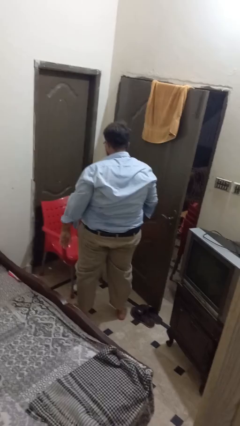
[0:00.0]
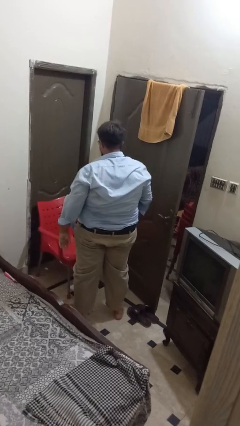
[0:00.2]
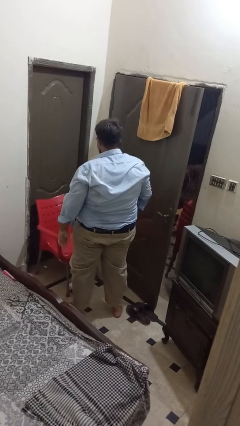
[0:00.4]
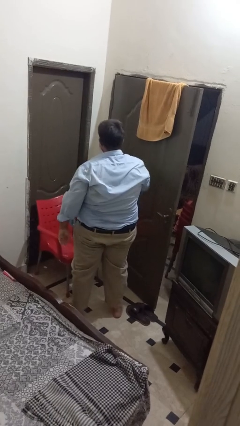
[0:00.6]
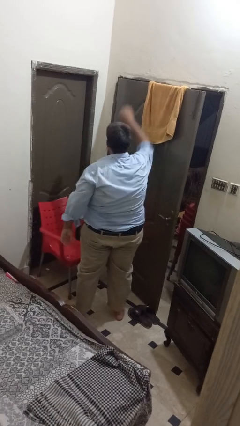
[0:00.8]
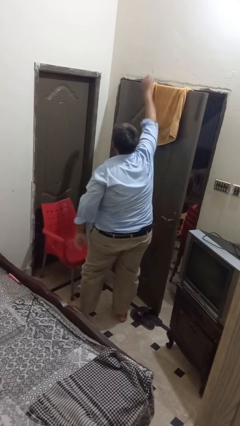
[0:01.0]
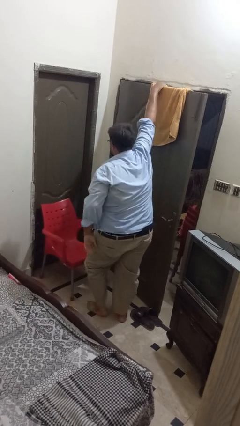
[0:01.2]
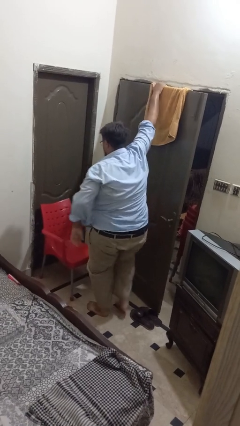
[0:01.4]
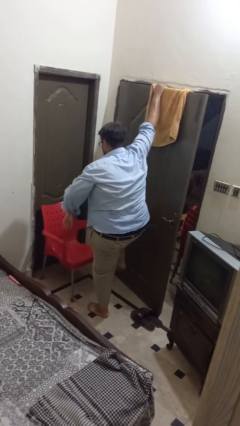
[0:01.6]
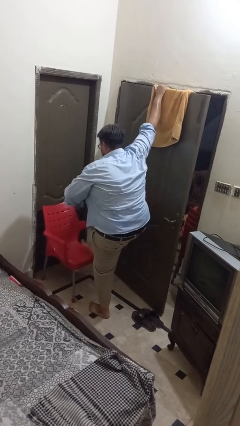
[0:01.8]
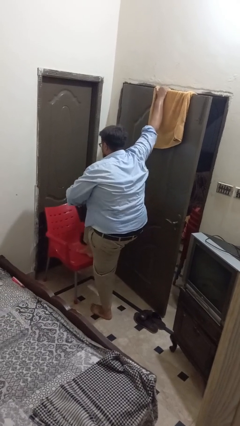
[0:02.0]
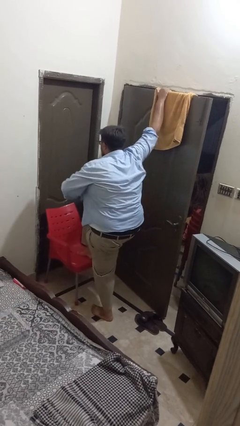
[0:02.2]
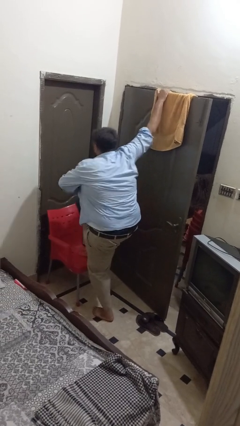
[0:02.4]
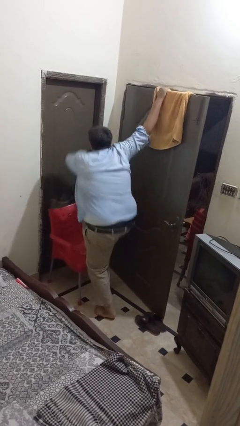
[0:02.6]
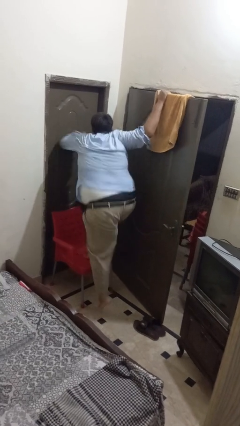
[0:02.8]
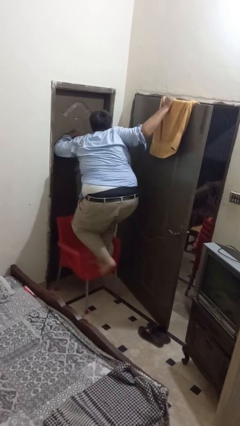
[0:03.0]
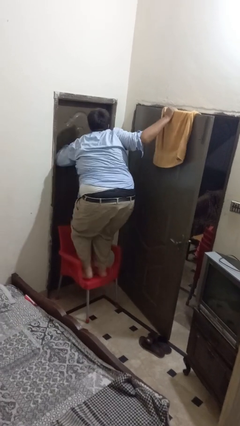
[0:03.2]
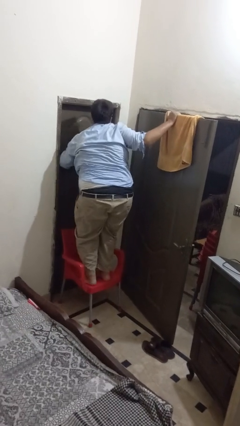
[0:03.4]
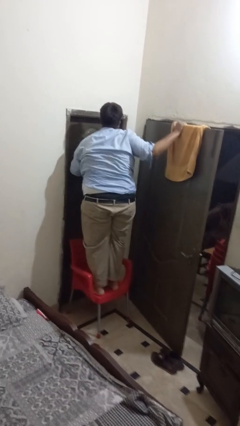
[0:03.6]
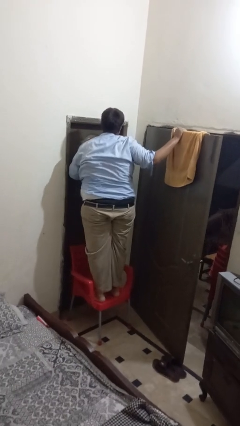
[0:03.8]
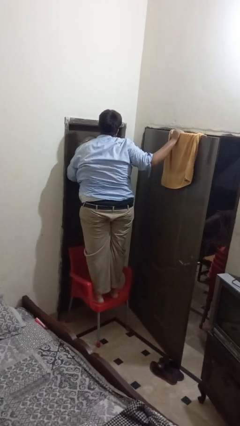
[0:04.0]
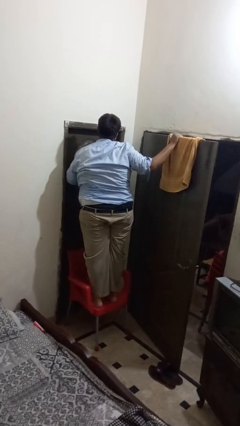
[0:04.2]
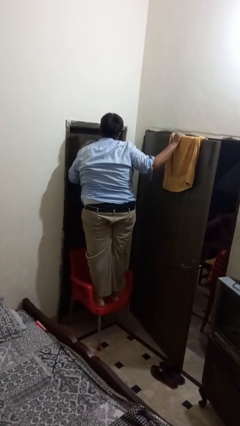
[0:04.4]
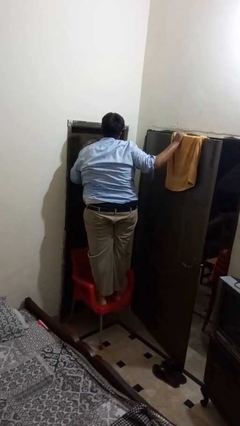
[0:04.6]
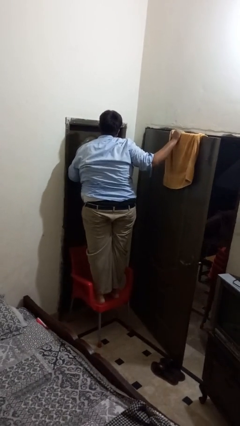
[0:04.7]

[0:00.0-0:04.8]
person climbs on chair

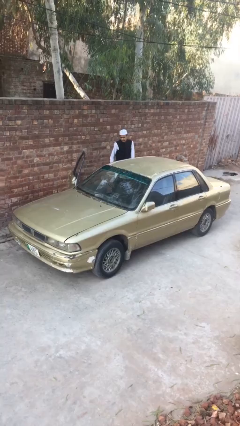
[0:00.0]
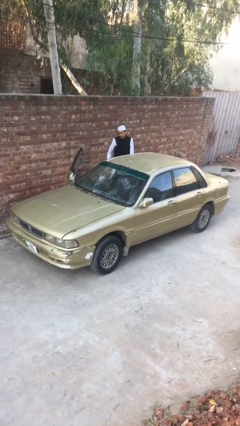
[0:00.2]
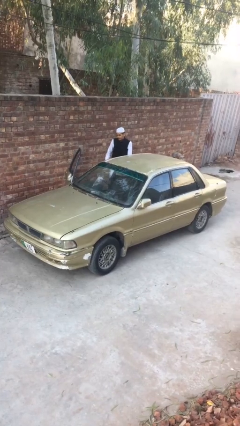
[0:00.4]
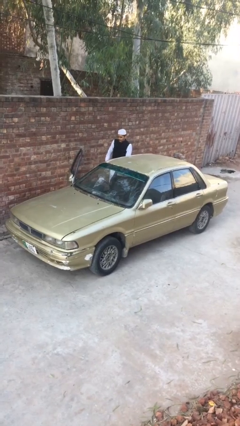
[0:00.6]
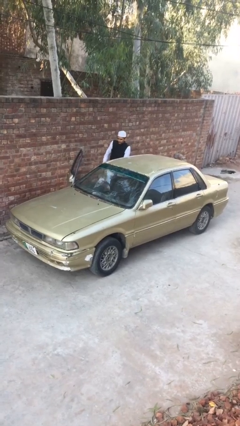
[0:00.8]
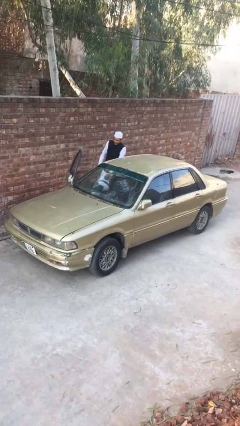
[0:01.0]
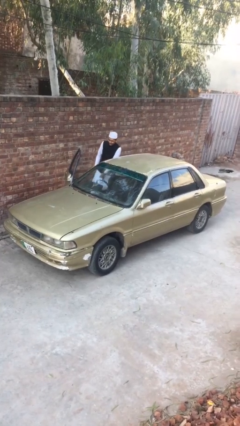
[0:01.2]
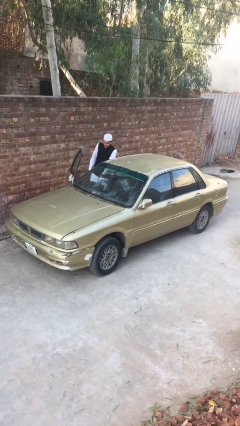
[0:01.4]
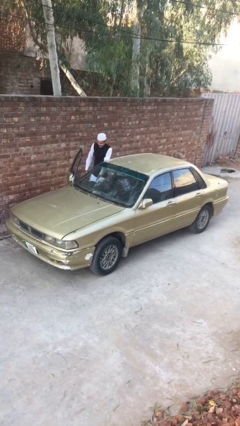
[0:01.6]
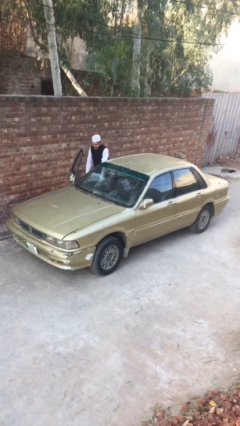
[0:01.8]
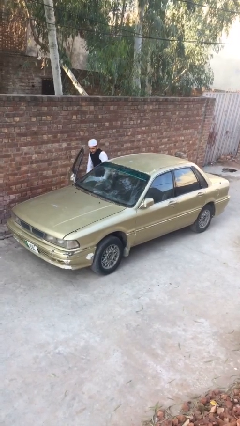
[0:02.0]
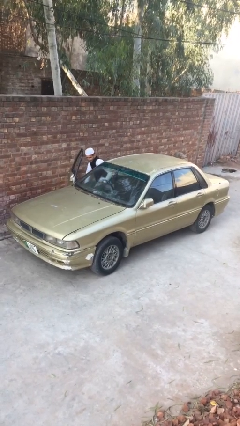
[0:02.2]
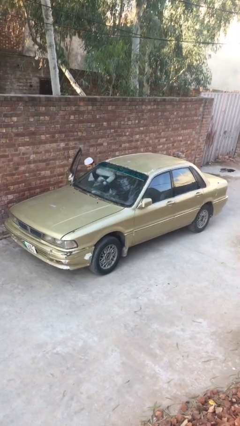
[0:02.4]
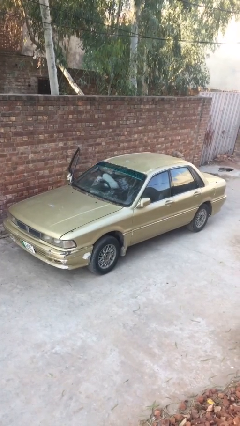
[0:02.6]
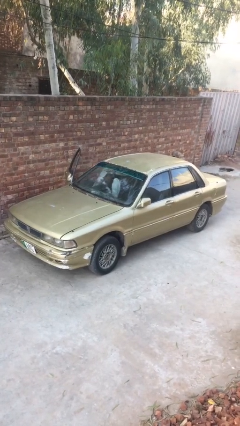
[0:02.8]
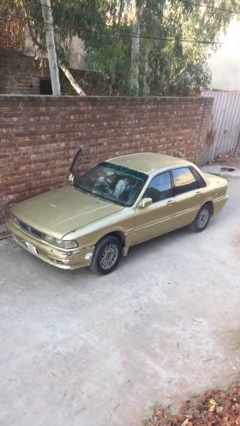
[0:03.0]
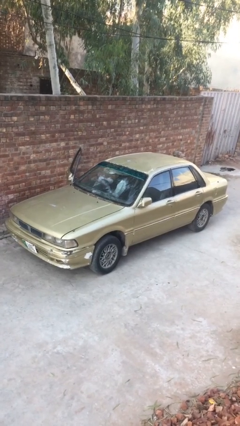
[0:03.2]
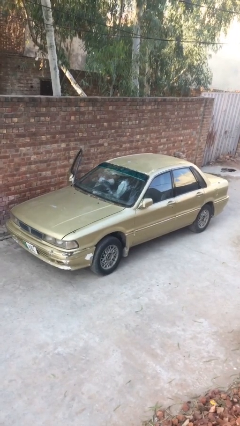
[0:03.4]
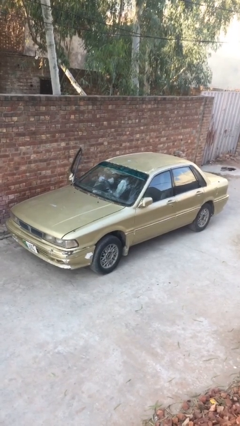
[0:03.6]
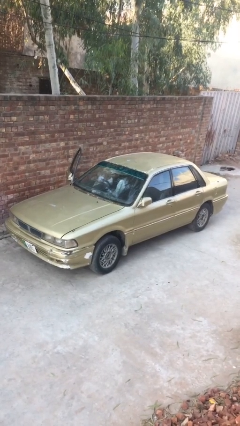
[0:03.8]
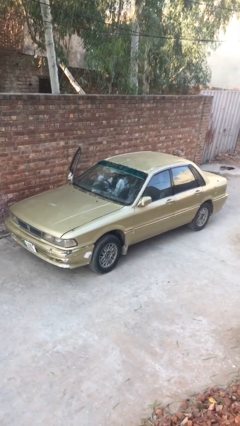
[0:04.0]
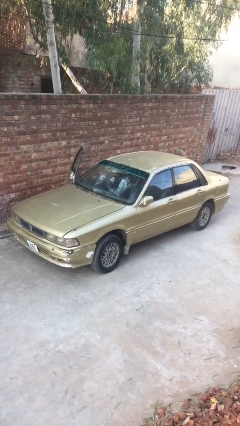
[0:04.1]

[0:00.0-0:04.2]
person enters car

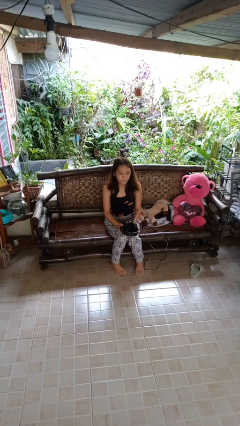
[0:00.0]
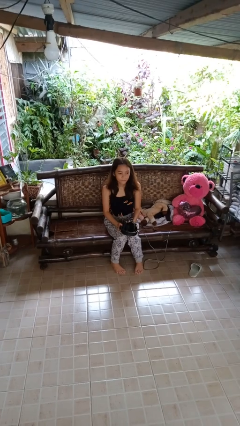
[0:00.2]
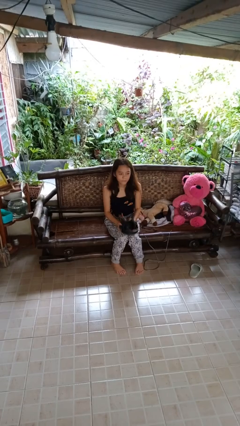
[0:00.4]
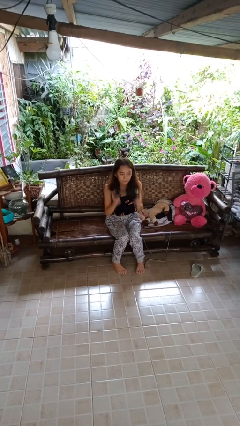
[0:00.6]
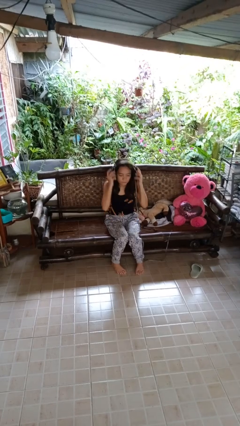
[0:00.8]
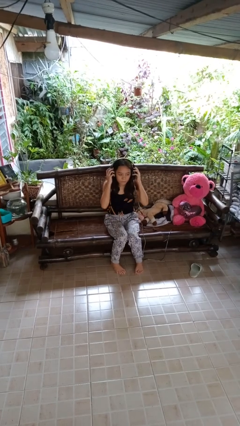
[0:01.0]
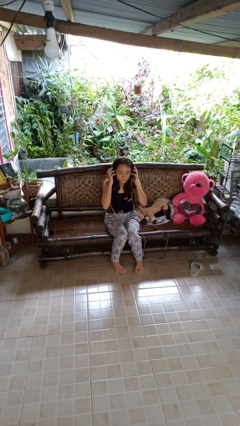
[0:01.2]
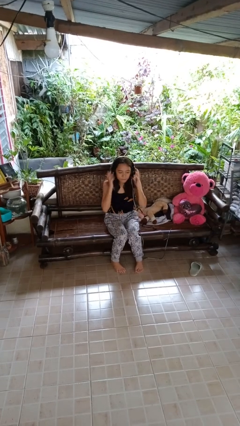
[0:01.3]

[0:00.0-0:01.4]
person puts on headphones

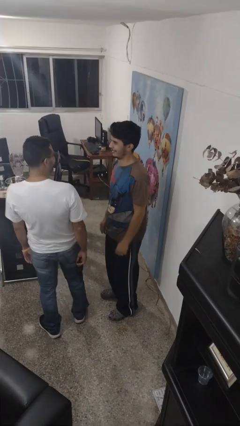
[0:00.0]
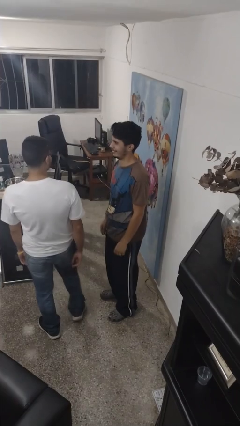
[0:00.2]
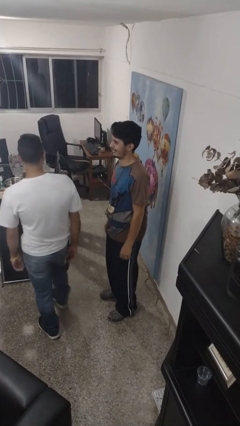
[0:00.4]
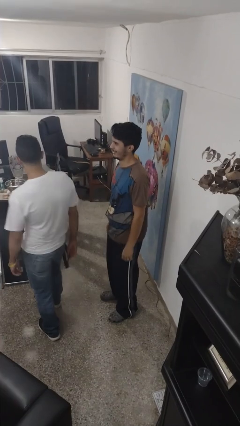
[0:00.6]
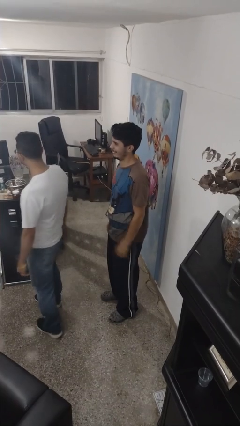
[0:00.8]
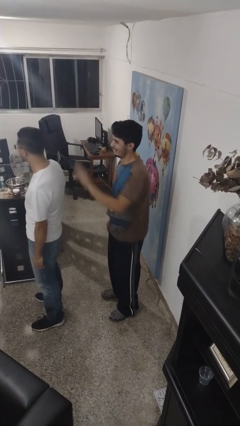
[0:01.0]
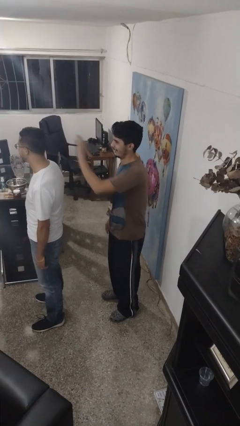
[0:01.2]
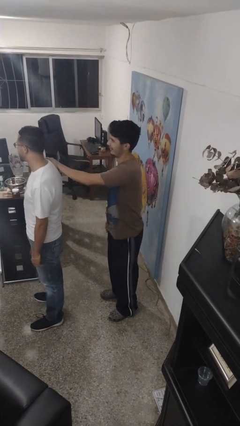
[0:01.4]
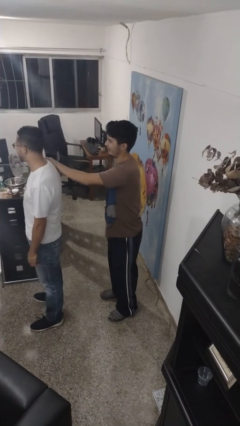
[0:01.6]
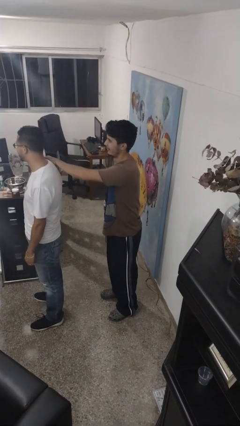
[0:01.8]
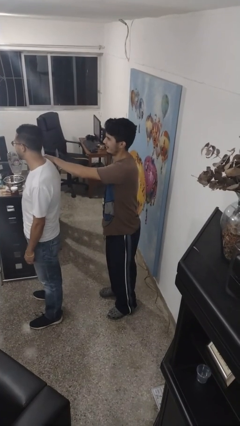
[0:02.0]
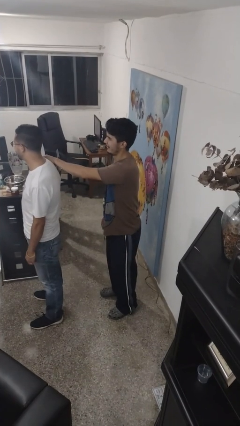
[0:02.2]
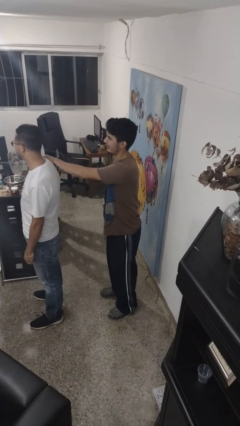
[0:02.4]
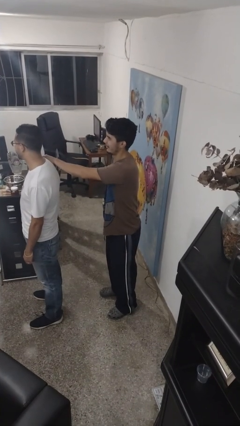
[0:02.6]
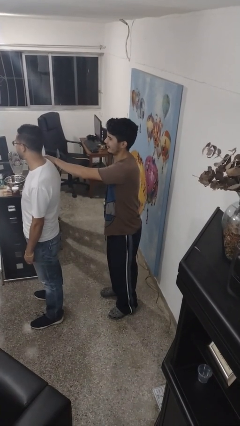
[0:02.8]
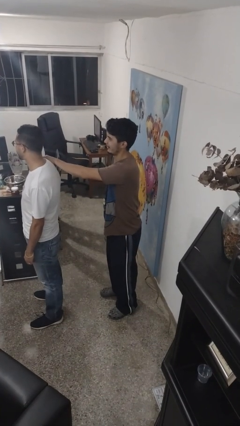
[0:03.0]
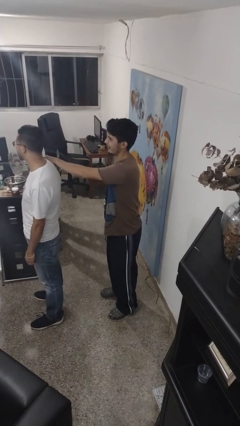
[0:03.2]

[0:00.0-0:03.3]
person grabs person by shoulder

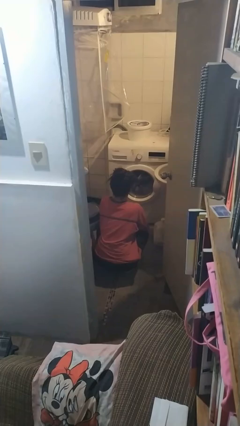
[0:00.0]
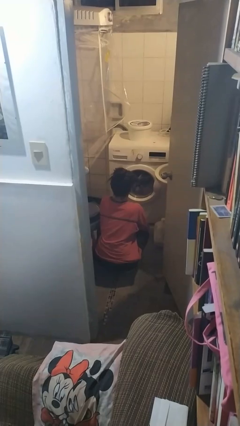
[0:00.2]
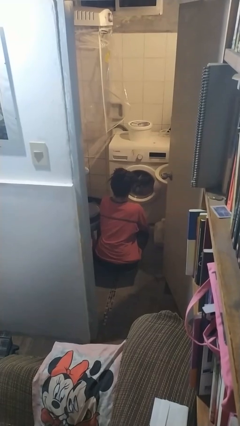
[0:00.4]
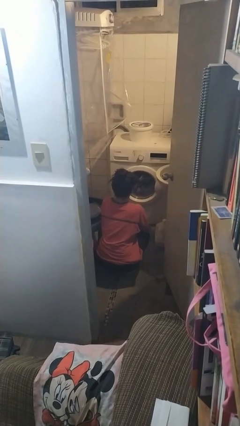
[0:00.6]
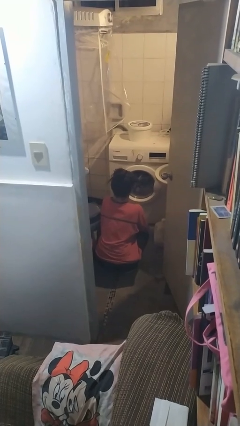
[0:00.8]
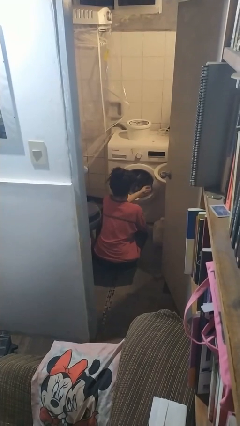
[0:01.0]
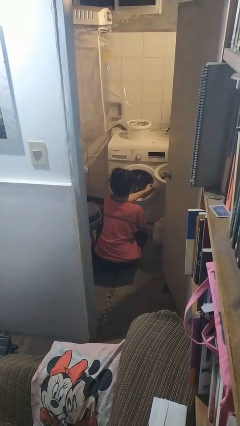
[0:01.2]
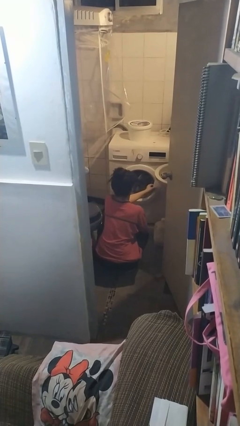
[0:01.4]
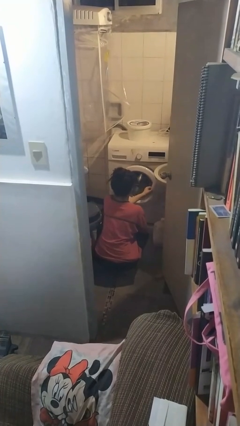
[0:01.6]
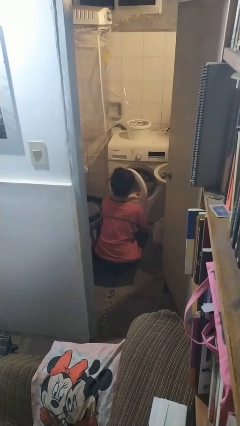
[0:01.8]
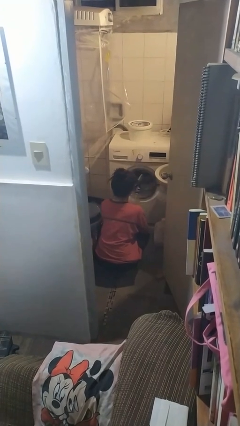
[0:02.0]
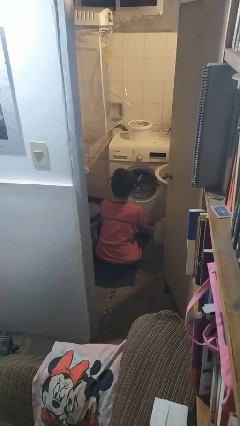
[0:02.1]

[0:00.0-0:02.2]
person opens clothes washer

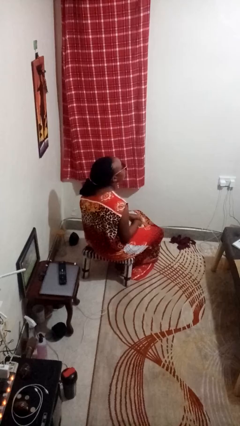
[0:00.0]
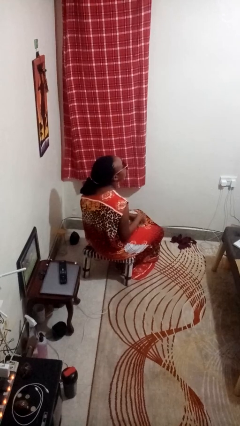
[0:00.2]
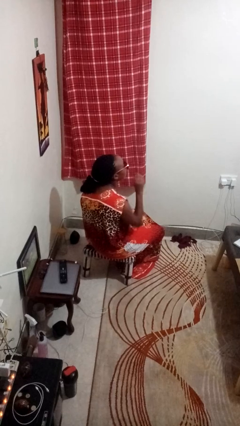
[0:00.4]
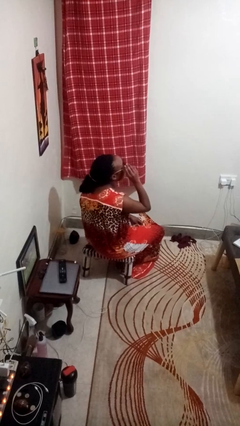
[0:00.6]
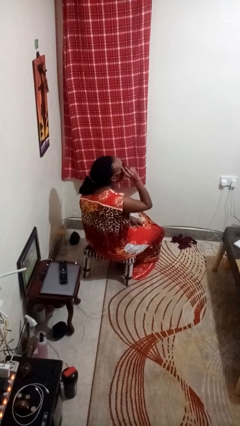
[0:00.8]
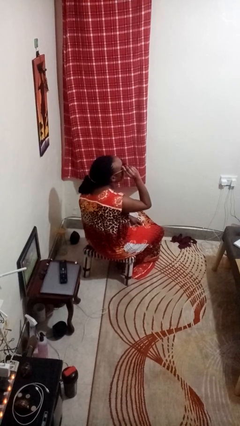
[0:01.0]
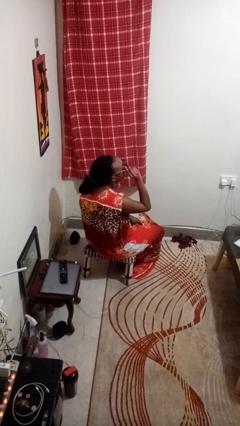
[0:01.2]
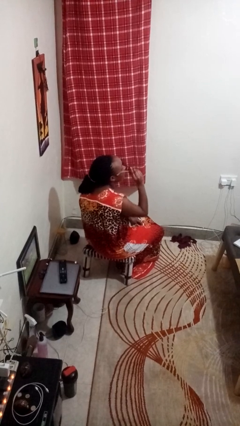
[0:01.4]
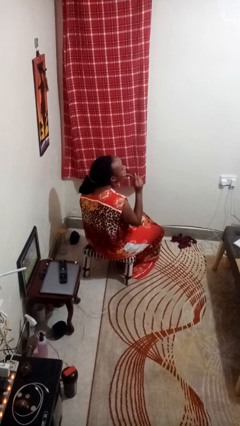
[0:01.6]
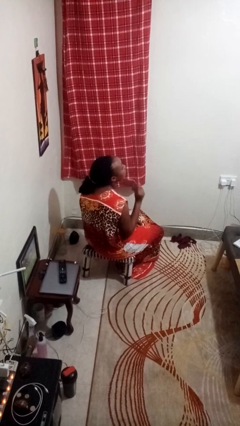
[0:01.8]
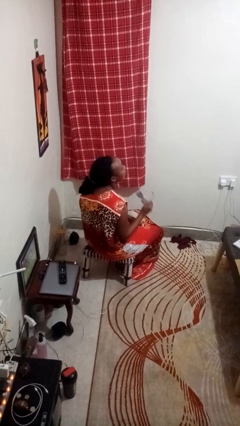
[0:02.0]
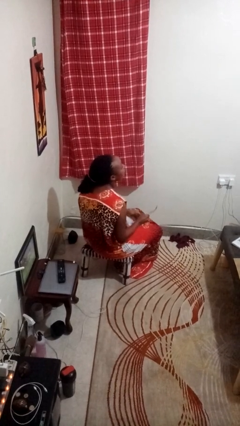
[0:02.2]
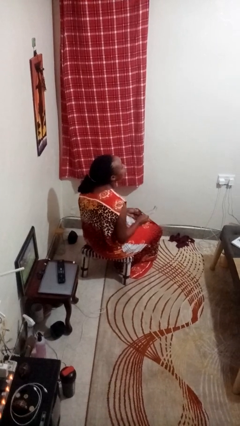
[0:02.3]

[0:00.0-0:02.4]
person takes off sunglasses
